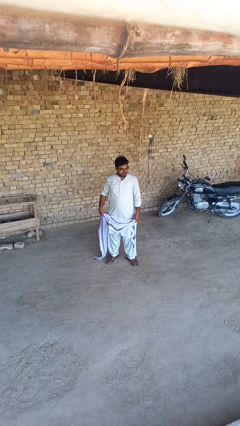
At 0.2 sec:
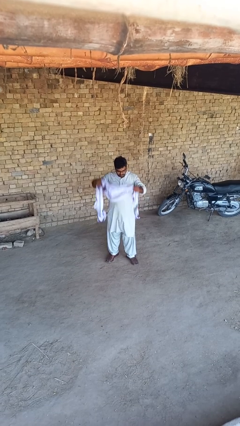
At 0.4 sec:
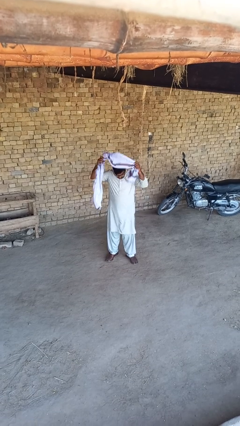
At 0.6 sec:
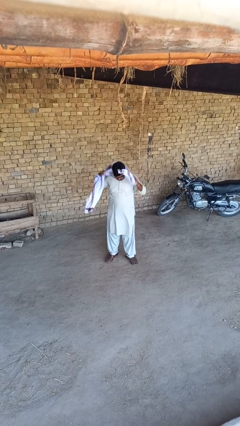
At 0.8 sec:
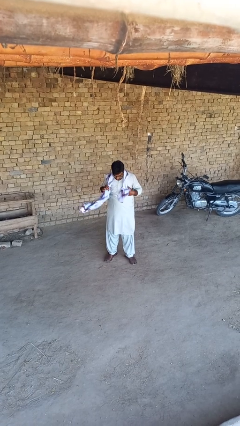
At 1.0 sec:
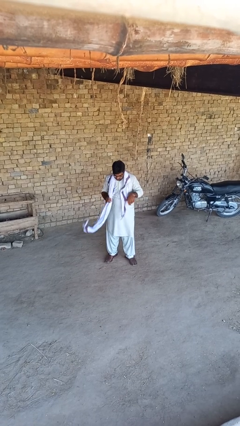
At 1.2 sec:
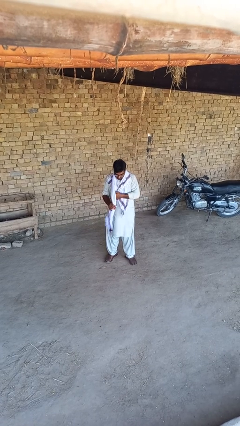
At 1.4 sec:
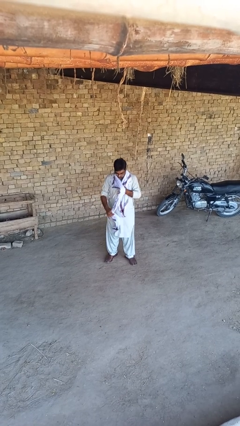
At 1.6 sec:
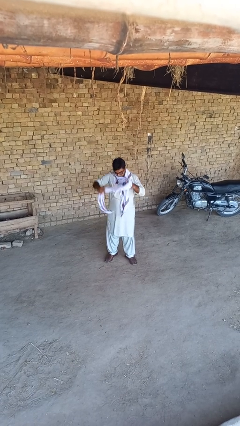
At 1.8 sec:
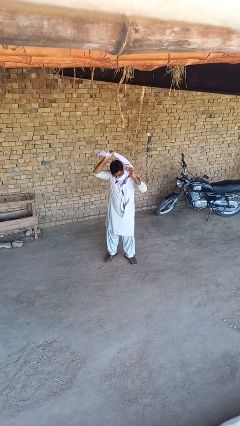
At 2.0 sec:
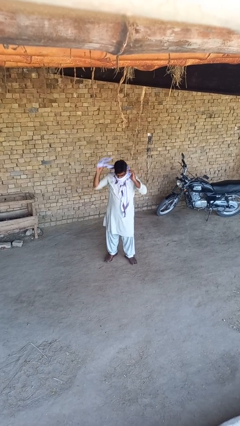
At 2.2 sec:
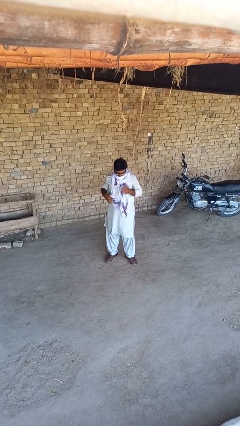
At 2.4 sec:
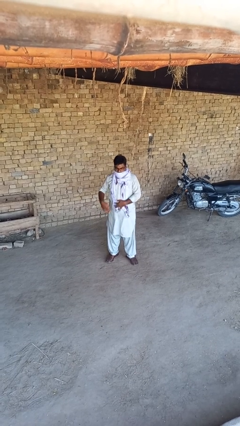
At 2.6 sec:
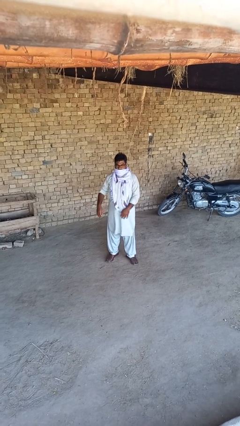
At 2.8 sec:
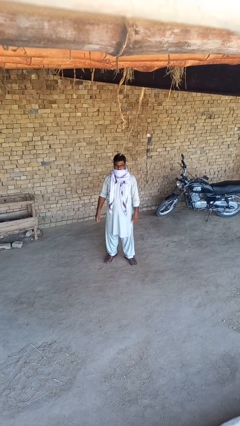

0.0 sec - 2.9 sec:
person puts on scarf

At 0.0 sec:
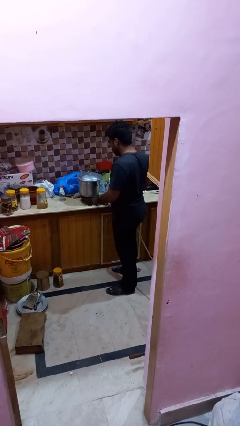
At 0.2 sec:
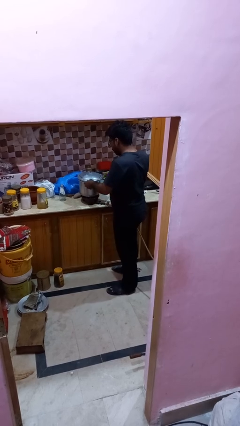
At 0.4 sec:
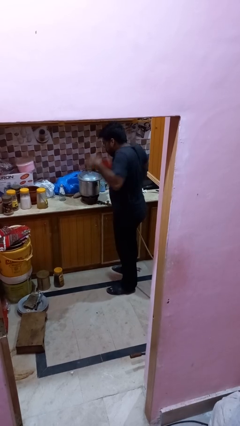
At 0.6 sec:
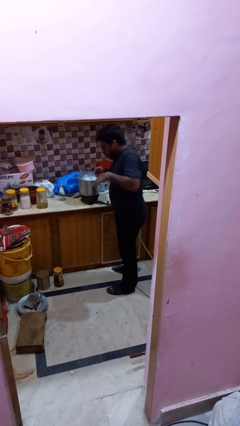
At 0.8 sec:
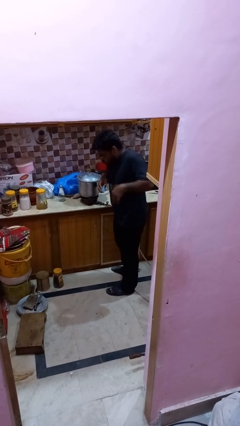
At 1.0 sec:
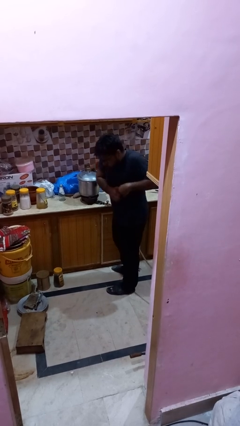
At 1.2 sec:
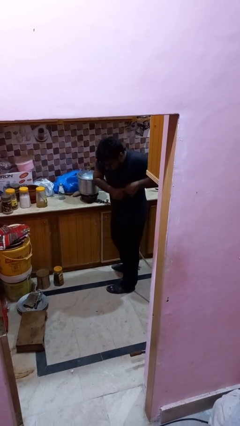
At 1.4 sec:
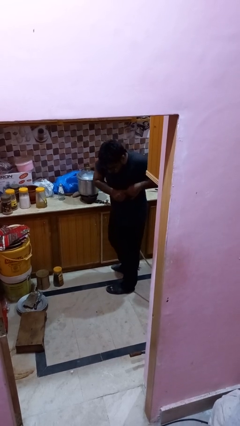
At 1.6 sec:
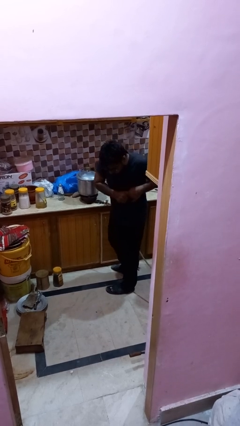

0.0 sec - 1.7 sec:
person burns hand

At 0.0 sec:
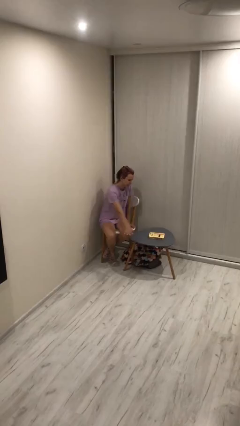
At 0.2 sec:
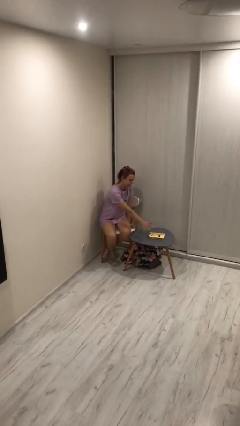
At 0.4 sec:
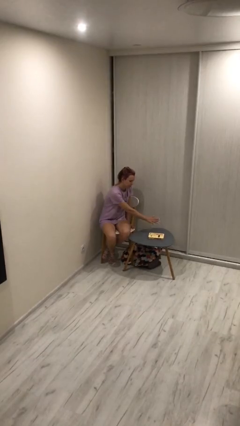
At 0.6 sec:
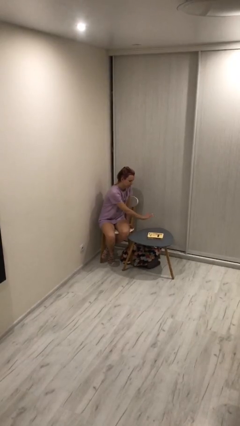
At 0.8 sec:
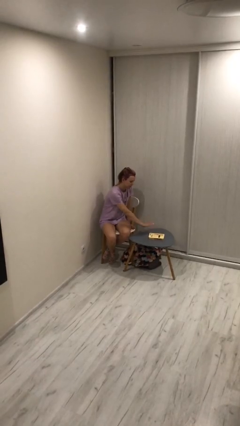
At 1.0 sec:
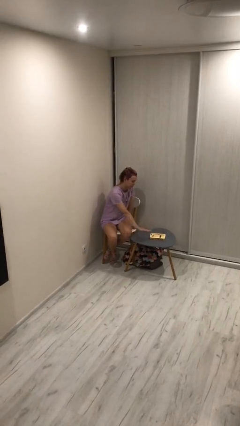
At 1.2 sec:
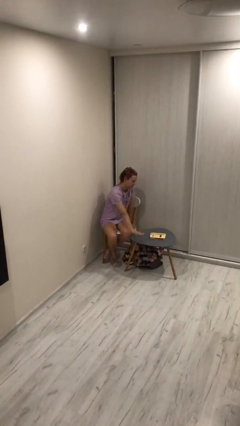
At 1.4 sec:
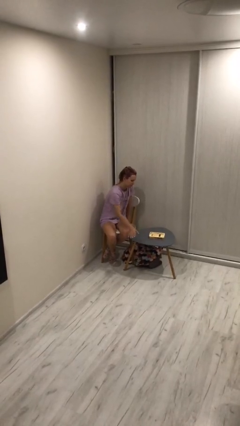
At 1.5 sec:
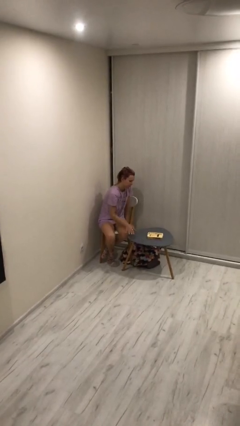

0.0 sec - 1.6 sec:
person waves hand over object

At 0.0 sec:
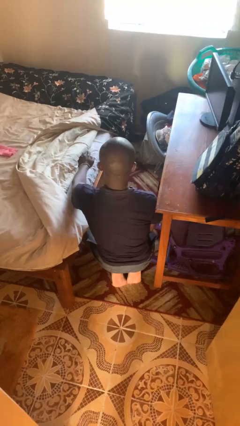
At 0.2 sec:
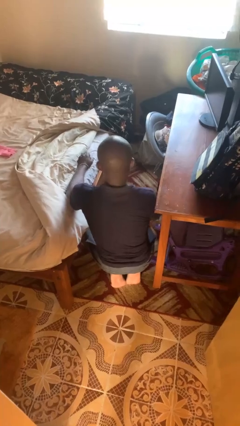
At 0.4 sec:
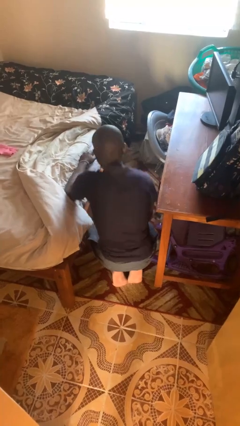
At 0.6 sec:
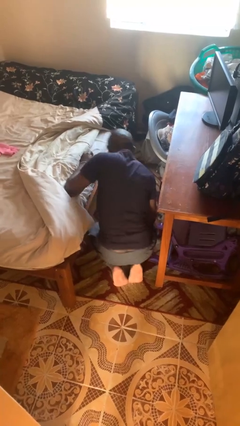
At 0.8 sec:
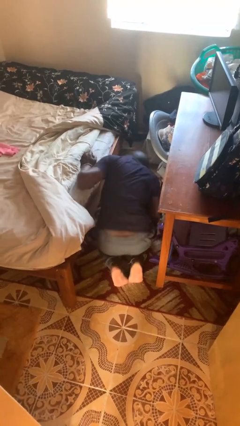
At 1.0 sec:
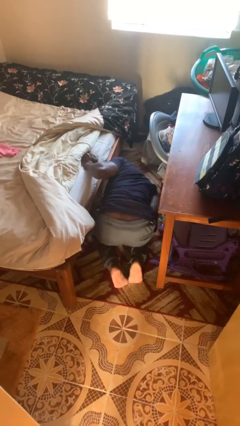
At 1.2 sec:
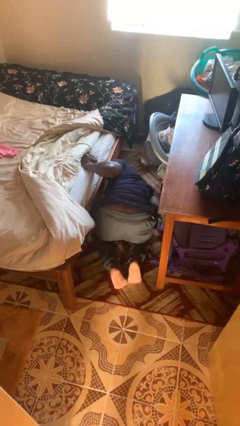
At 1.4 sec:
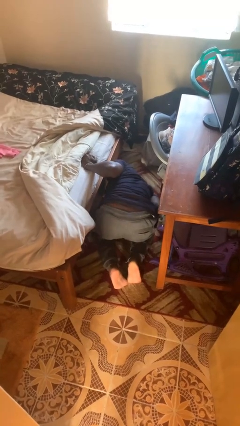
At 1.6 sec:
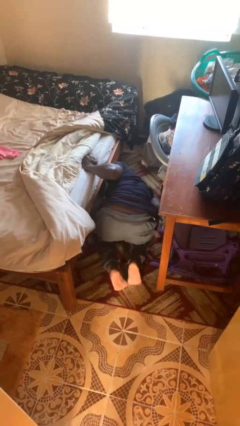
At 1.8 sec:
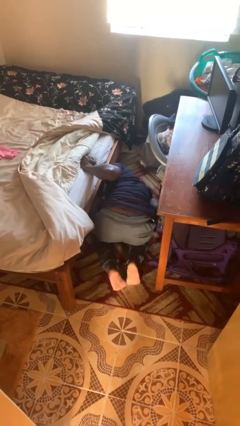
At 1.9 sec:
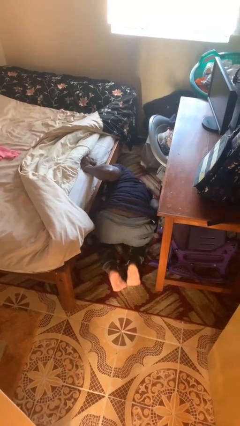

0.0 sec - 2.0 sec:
person searches under bed

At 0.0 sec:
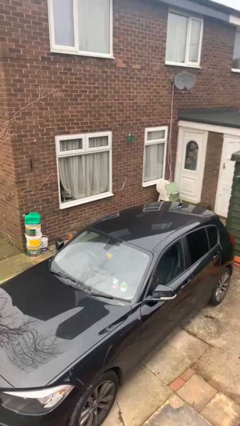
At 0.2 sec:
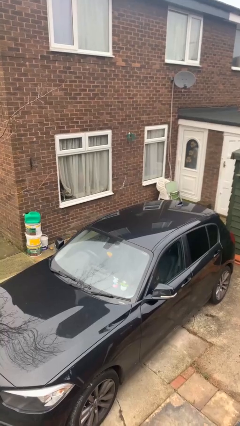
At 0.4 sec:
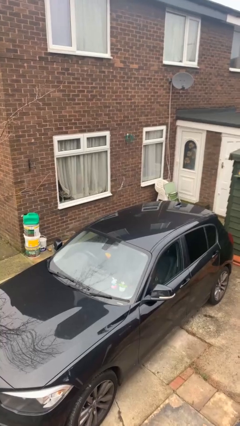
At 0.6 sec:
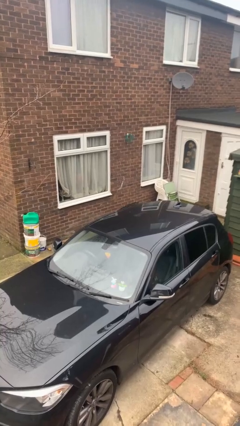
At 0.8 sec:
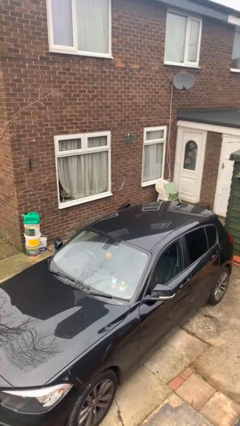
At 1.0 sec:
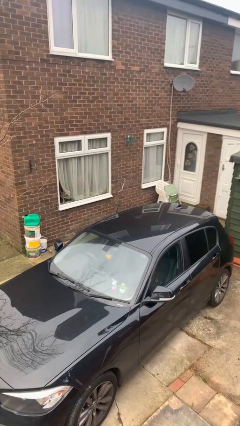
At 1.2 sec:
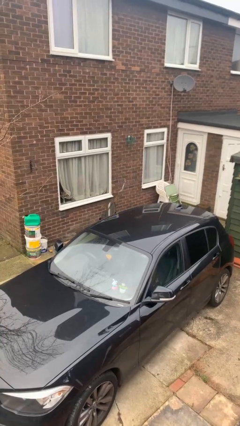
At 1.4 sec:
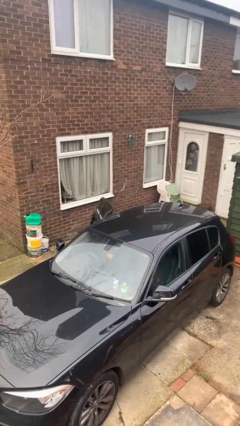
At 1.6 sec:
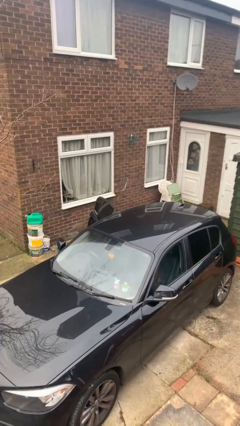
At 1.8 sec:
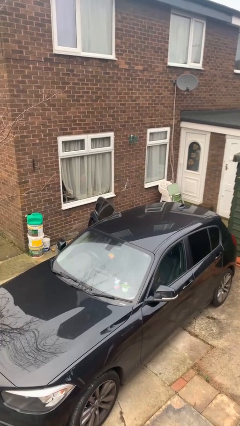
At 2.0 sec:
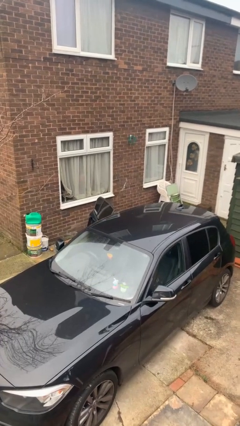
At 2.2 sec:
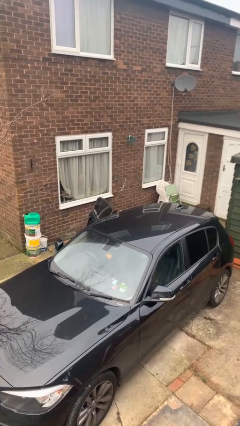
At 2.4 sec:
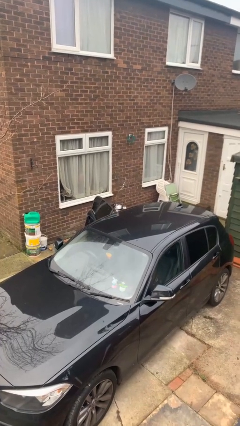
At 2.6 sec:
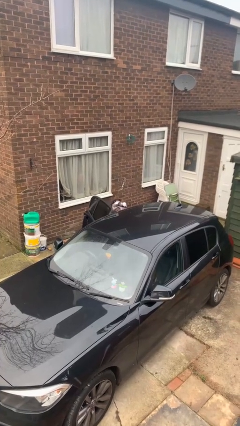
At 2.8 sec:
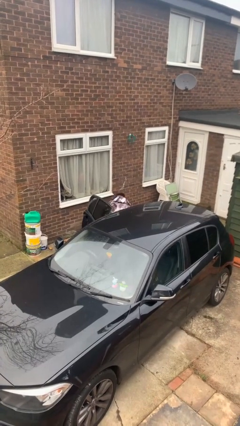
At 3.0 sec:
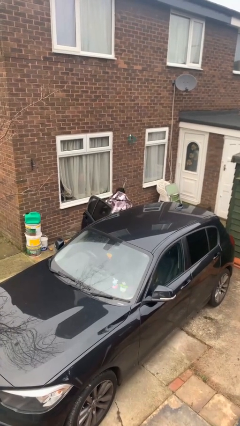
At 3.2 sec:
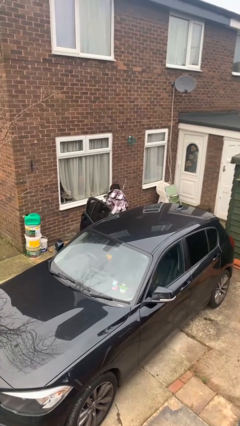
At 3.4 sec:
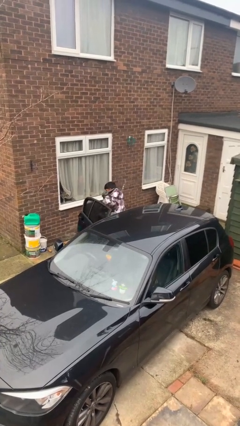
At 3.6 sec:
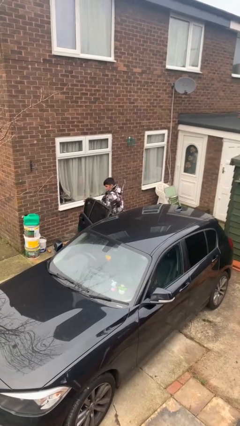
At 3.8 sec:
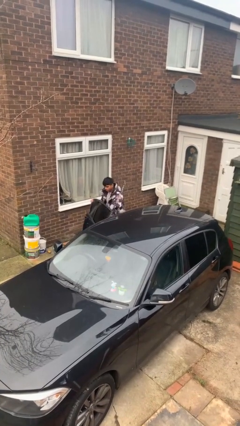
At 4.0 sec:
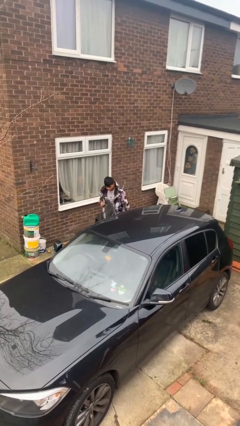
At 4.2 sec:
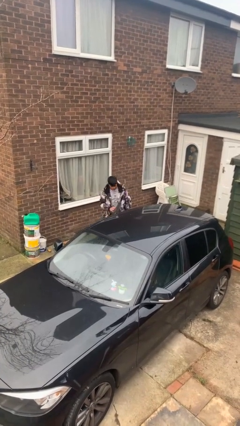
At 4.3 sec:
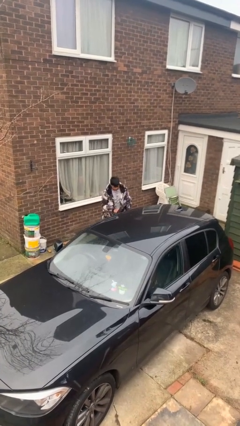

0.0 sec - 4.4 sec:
car drops off person

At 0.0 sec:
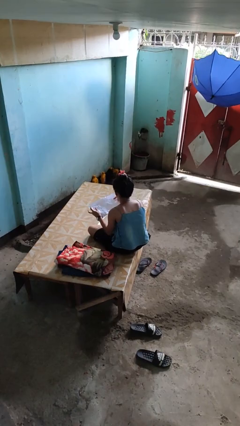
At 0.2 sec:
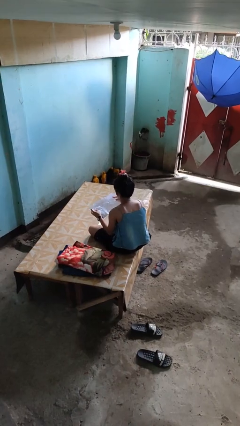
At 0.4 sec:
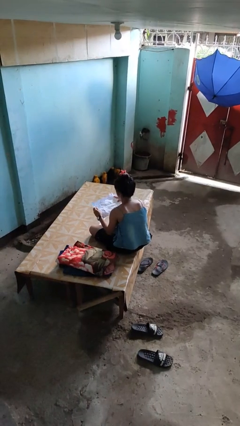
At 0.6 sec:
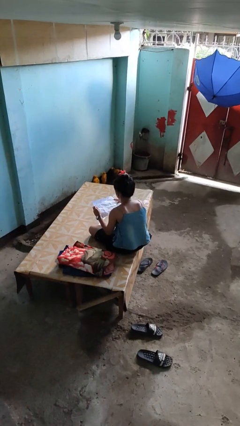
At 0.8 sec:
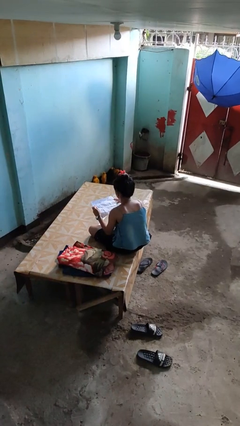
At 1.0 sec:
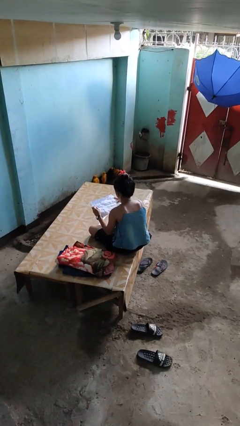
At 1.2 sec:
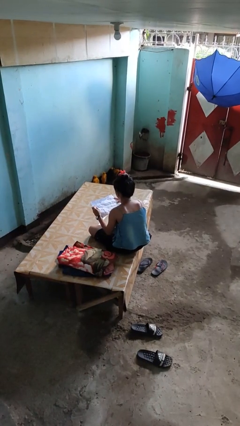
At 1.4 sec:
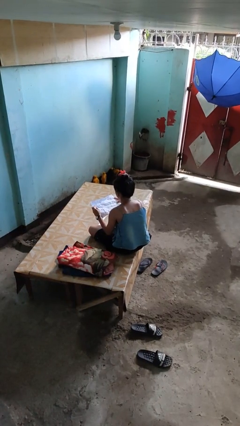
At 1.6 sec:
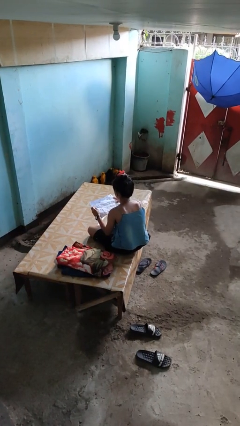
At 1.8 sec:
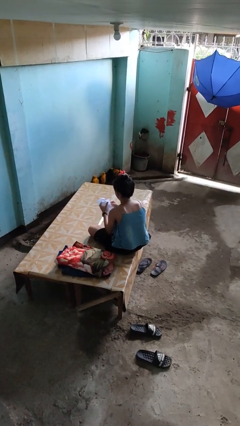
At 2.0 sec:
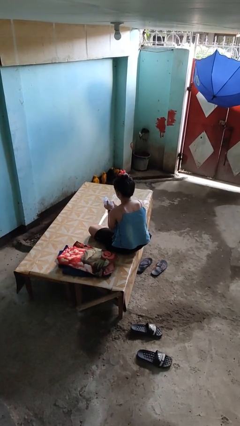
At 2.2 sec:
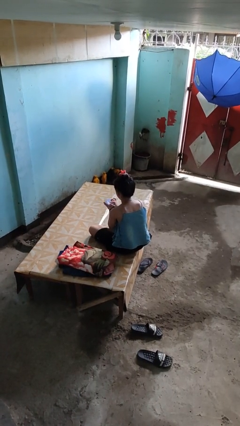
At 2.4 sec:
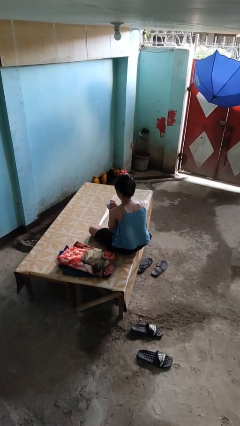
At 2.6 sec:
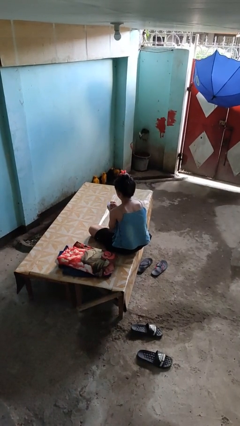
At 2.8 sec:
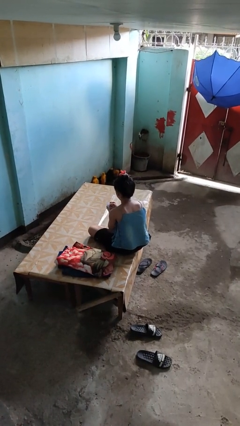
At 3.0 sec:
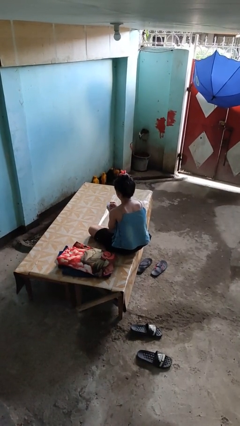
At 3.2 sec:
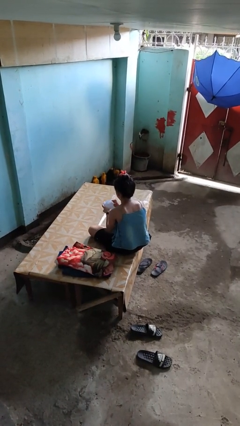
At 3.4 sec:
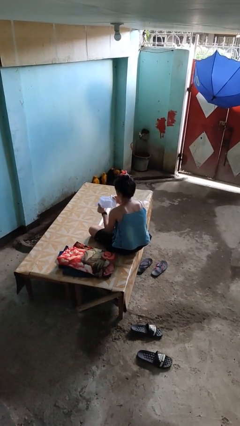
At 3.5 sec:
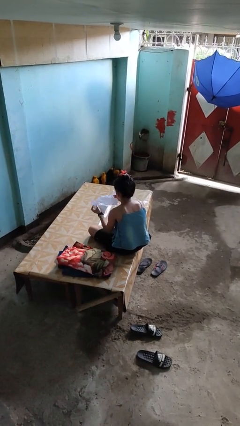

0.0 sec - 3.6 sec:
person crumples paper

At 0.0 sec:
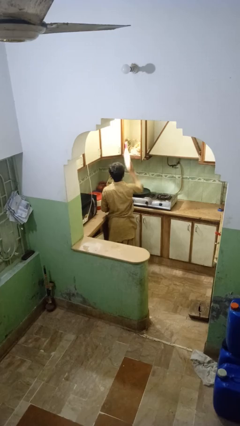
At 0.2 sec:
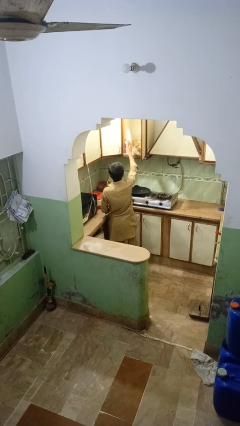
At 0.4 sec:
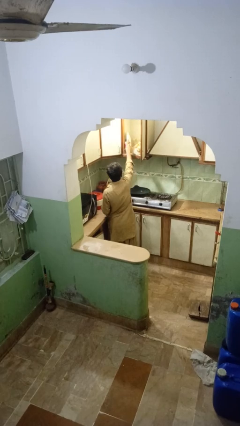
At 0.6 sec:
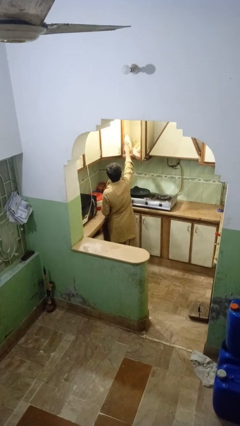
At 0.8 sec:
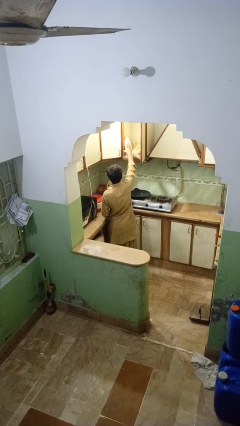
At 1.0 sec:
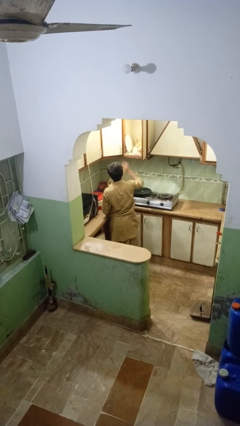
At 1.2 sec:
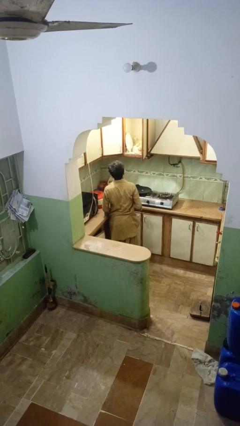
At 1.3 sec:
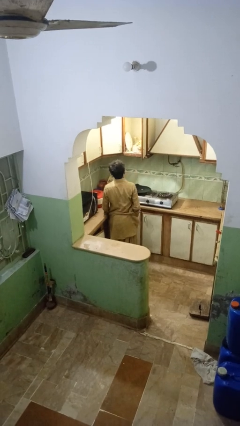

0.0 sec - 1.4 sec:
person puts object in cabinet
